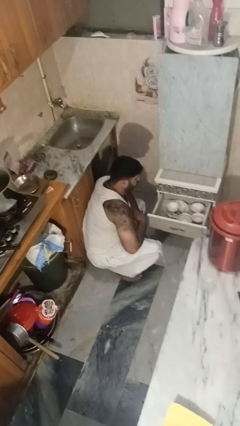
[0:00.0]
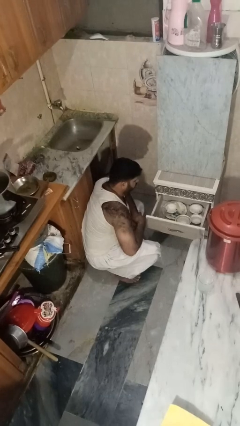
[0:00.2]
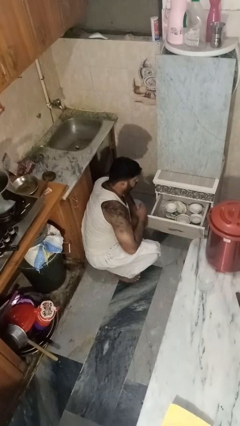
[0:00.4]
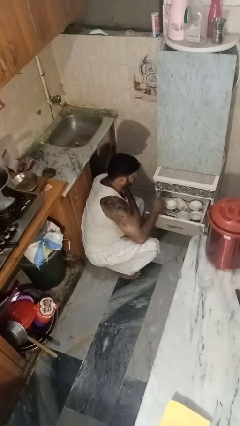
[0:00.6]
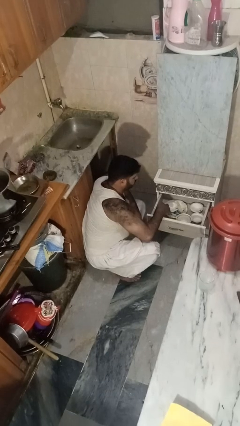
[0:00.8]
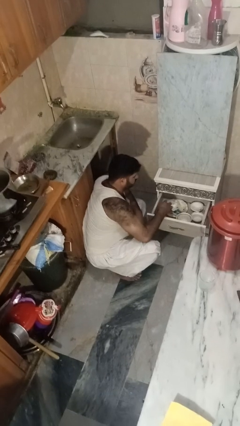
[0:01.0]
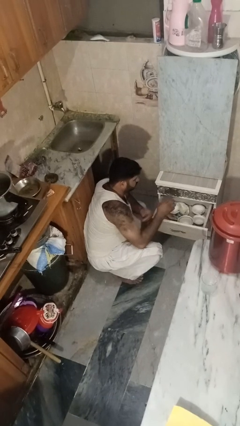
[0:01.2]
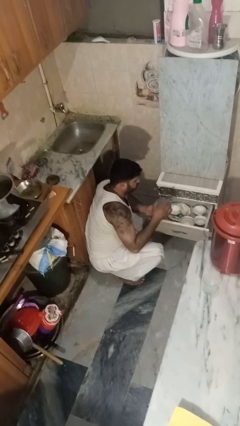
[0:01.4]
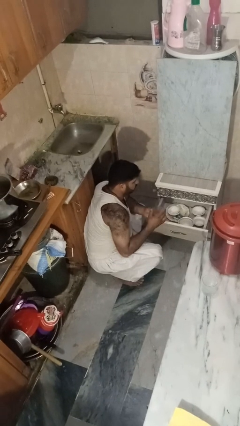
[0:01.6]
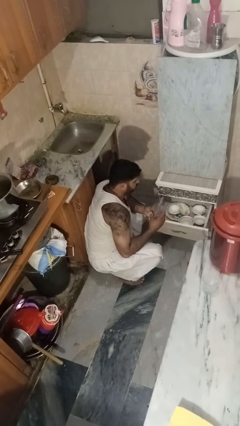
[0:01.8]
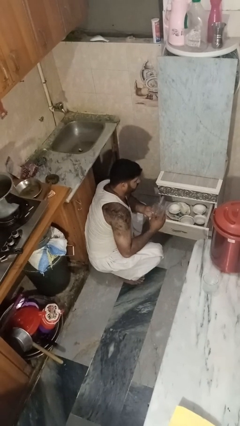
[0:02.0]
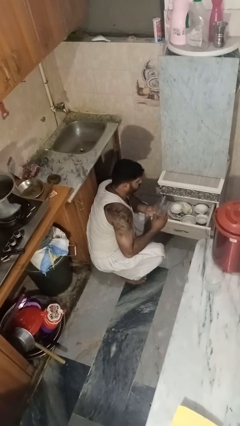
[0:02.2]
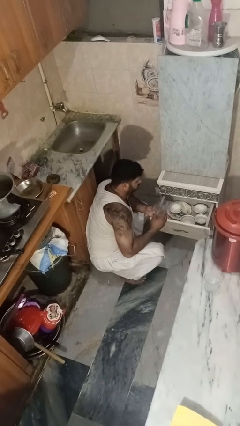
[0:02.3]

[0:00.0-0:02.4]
person takes object from kitchen drawer

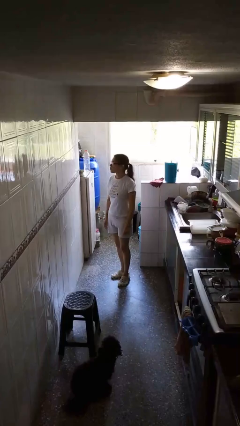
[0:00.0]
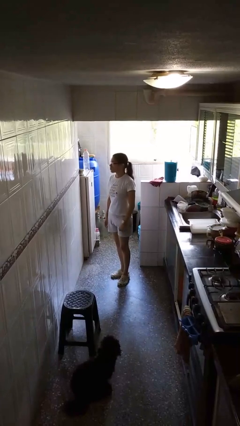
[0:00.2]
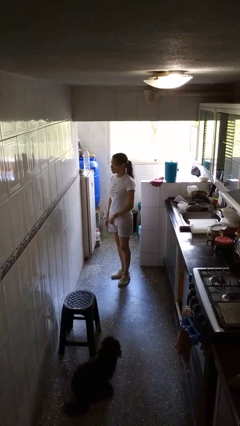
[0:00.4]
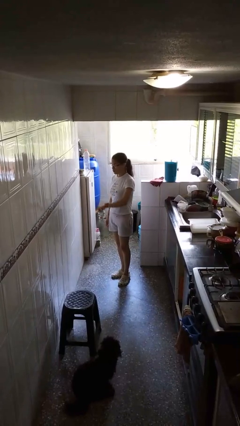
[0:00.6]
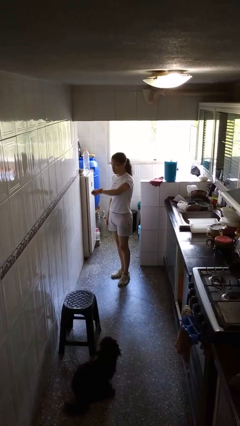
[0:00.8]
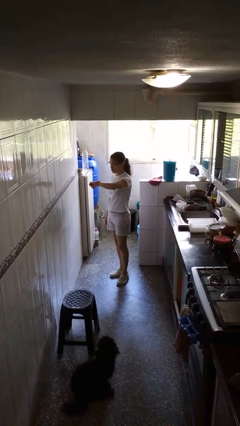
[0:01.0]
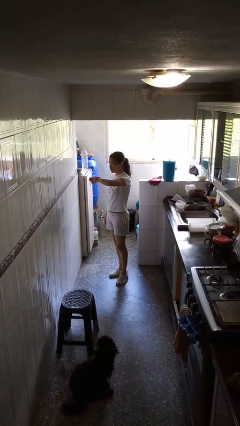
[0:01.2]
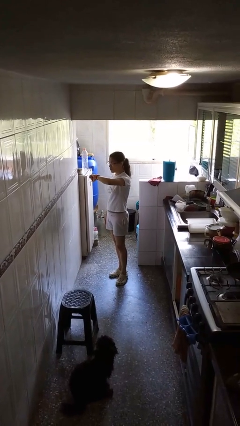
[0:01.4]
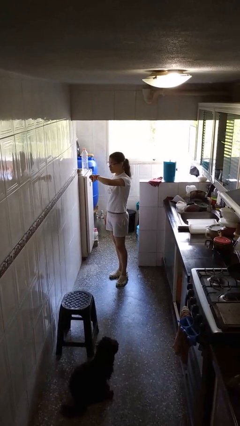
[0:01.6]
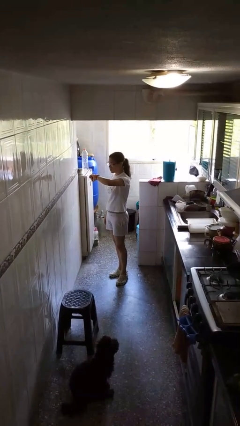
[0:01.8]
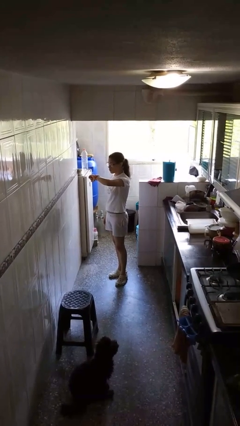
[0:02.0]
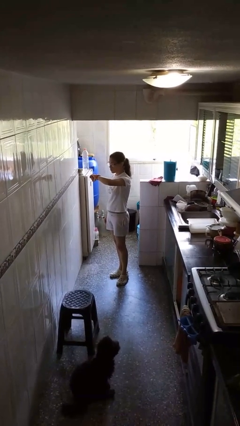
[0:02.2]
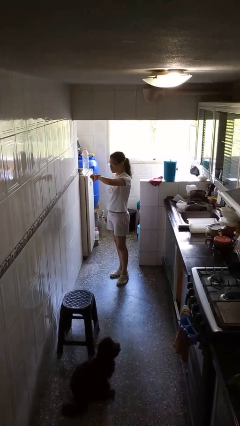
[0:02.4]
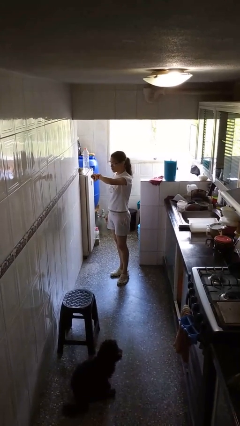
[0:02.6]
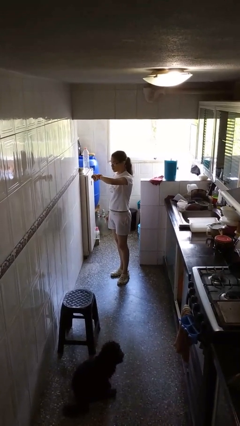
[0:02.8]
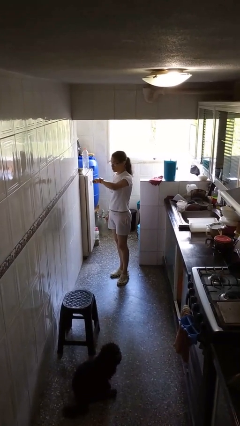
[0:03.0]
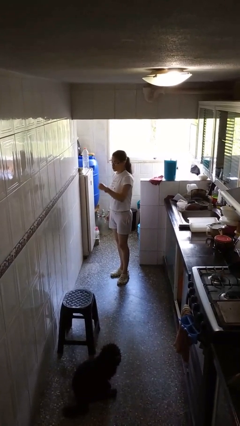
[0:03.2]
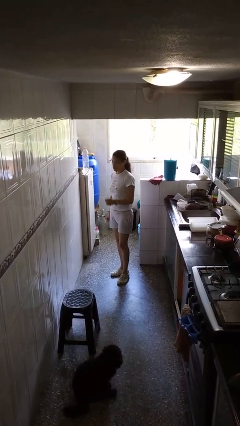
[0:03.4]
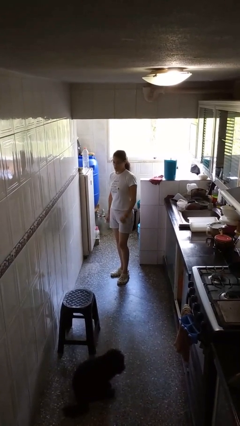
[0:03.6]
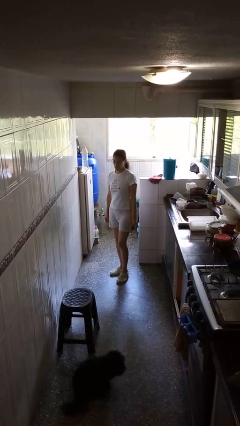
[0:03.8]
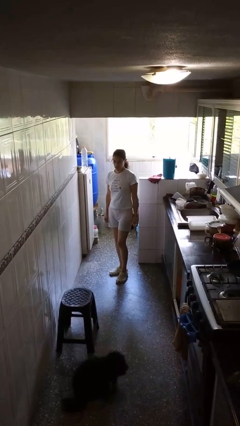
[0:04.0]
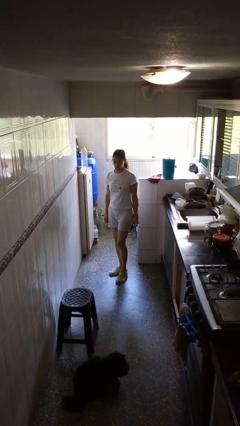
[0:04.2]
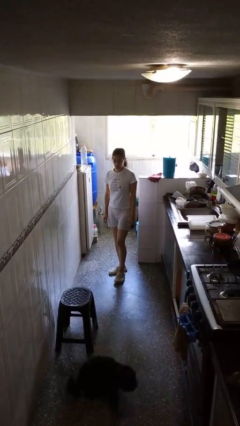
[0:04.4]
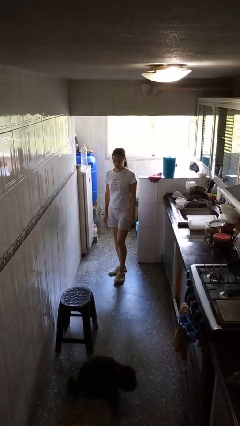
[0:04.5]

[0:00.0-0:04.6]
person looks at wristwatch

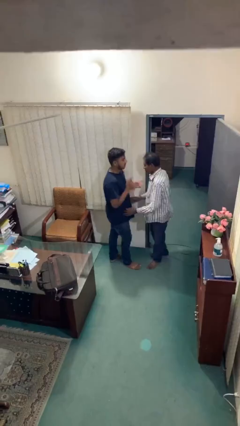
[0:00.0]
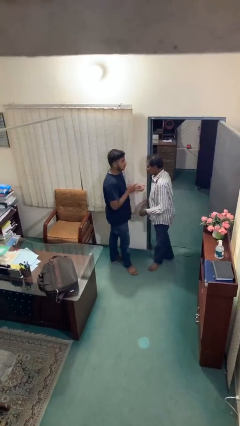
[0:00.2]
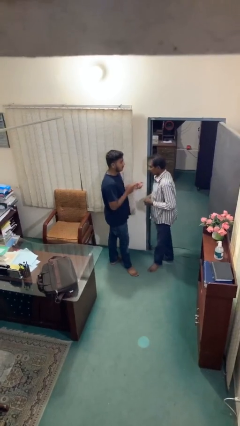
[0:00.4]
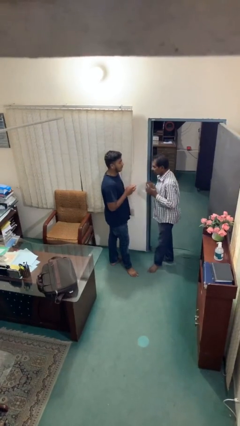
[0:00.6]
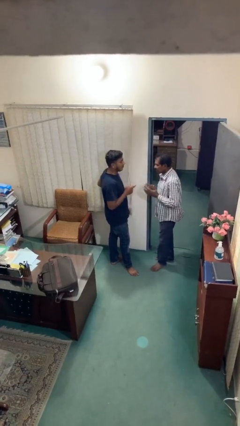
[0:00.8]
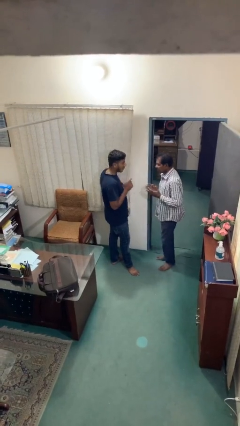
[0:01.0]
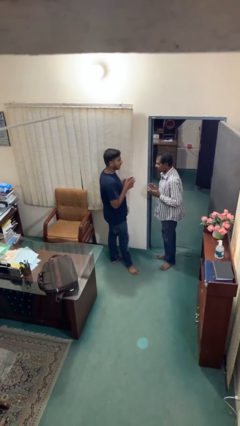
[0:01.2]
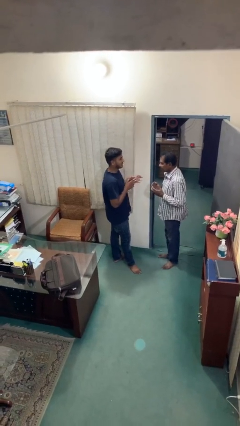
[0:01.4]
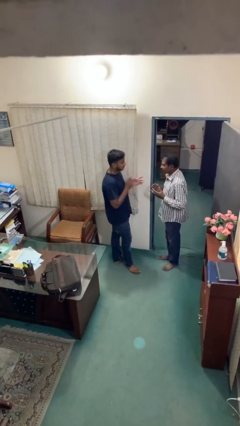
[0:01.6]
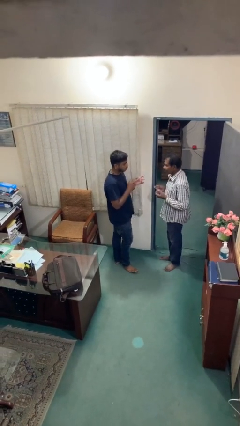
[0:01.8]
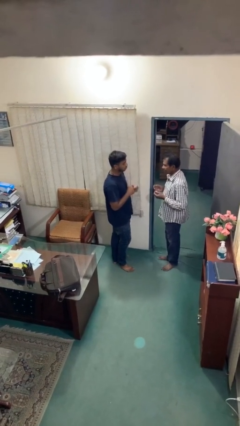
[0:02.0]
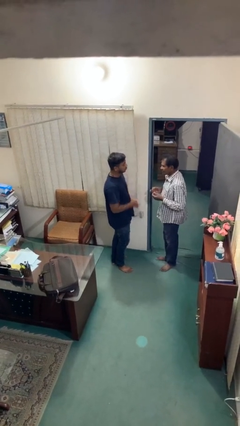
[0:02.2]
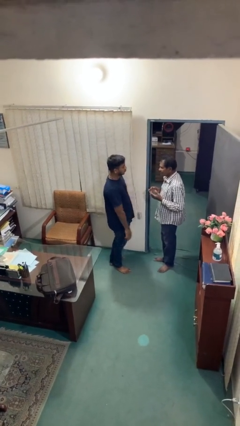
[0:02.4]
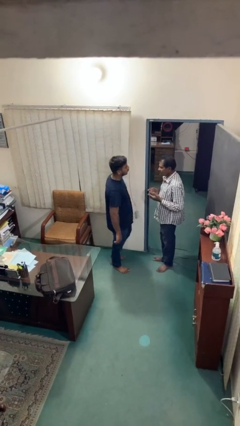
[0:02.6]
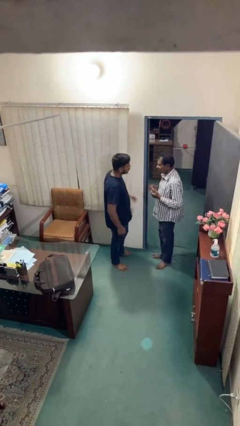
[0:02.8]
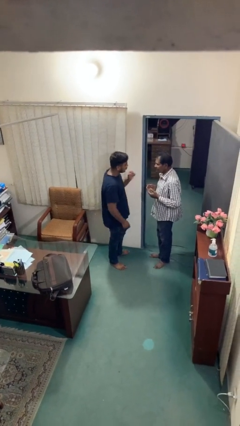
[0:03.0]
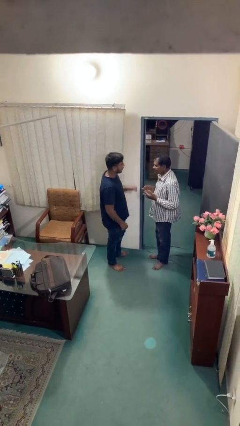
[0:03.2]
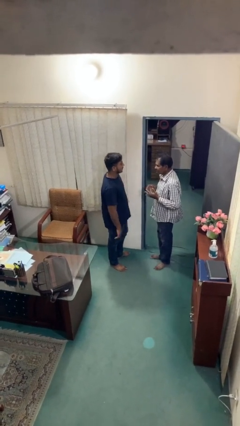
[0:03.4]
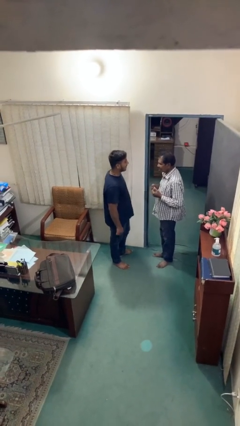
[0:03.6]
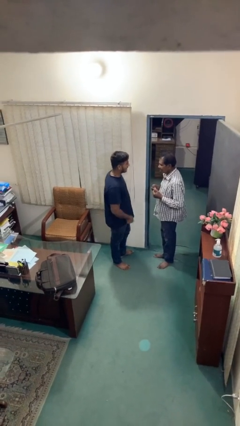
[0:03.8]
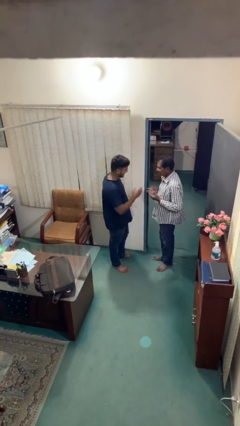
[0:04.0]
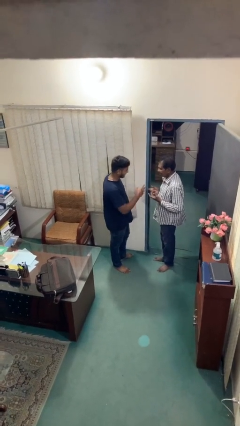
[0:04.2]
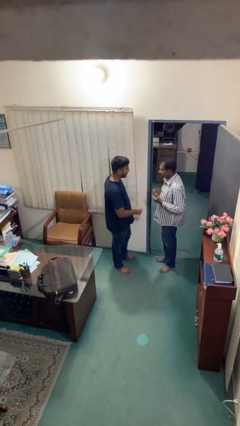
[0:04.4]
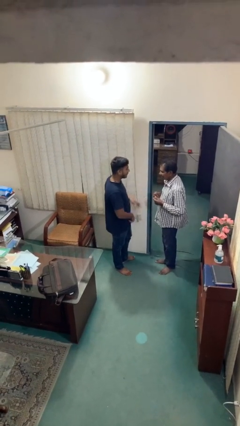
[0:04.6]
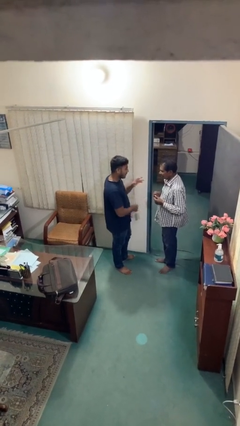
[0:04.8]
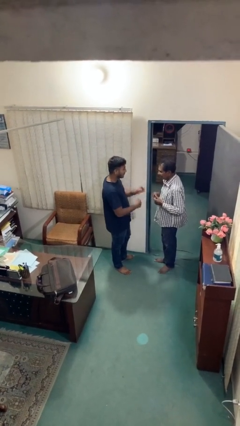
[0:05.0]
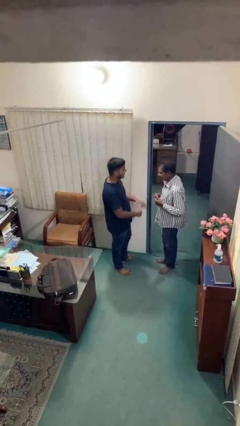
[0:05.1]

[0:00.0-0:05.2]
person talks to person

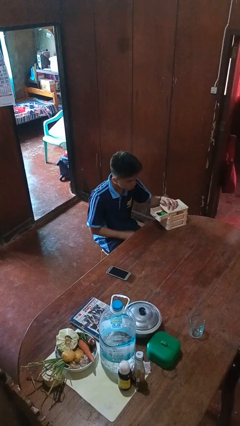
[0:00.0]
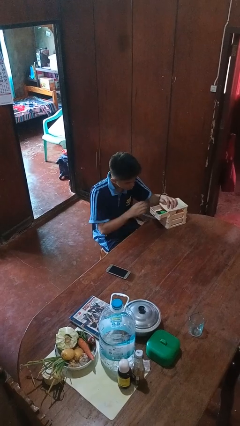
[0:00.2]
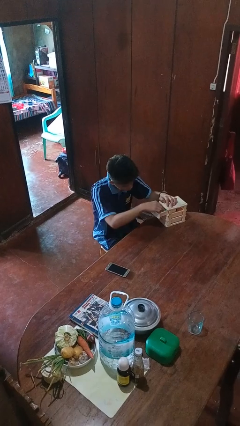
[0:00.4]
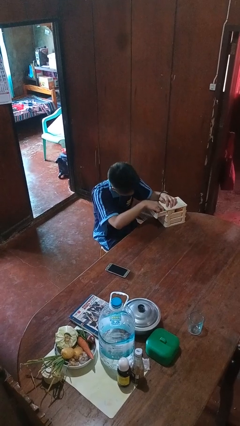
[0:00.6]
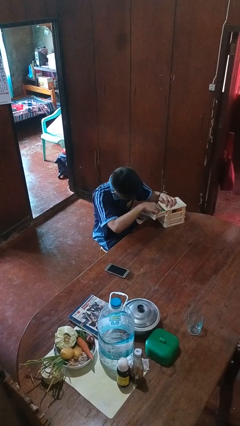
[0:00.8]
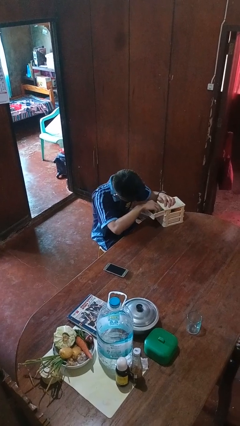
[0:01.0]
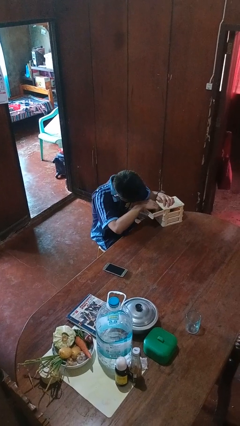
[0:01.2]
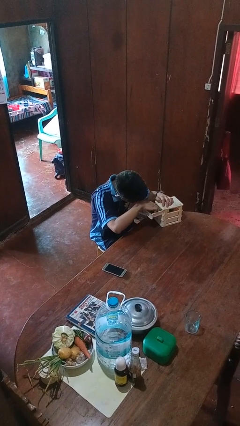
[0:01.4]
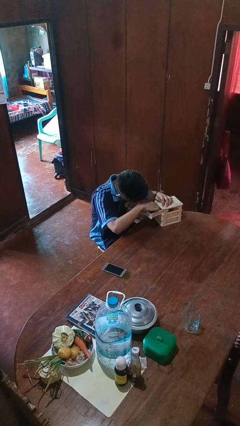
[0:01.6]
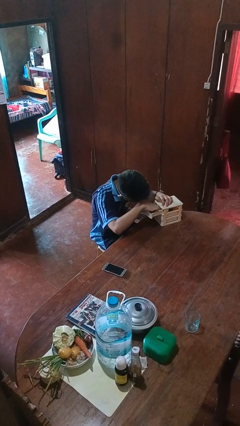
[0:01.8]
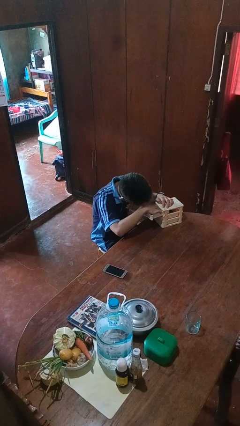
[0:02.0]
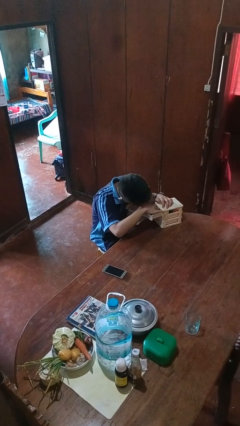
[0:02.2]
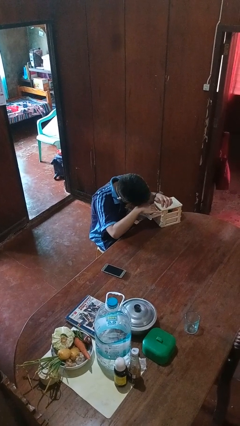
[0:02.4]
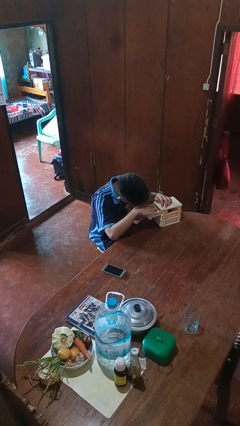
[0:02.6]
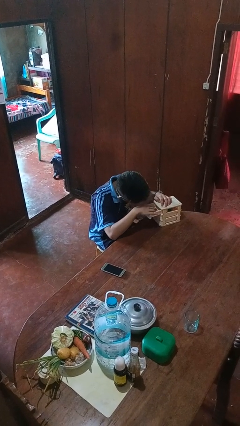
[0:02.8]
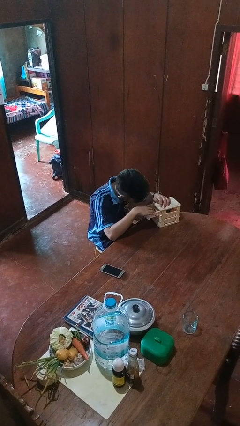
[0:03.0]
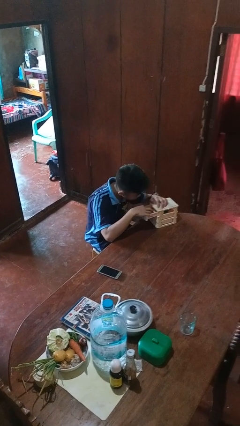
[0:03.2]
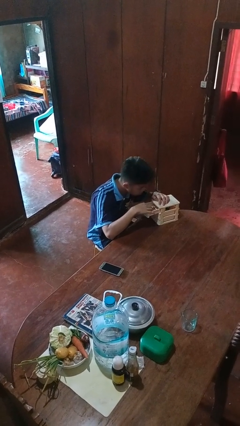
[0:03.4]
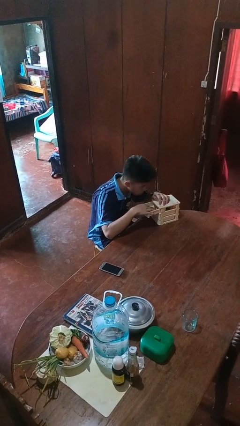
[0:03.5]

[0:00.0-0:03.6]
person searches jewelry box

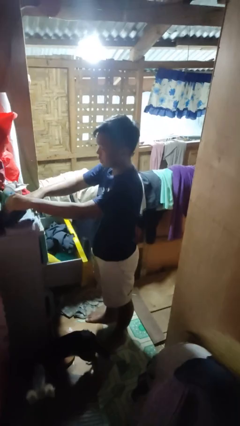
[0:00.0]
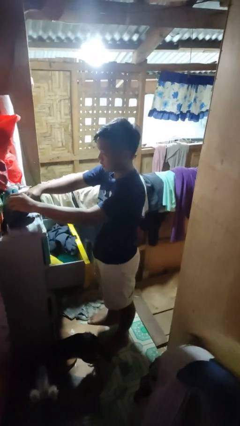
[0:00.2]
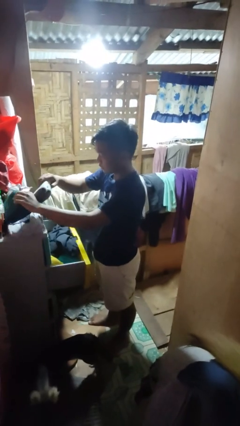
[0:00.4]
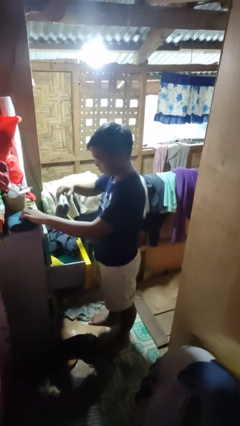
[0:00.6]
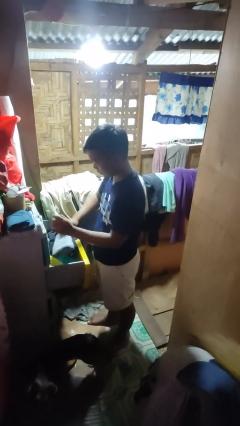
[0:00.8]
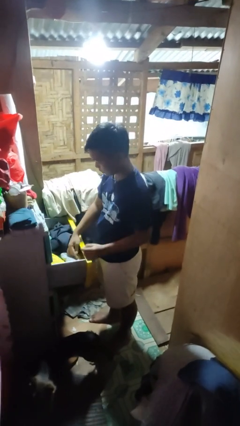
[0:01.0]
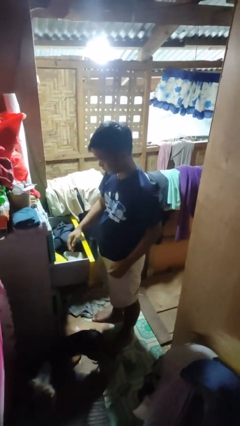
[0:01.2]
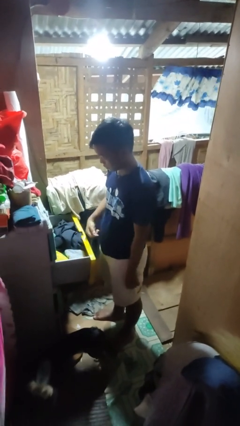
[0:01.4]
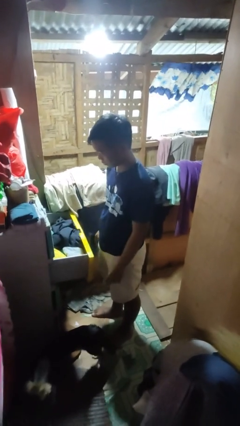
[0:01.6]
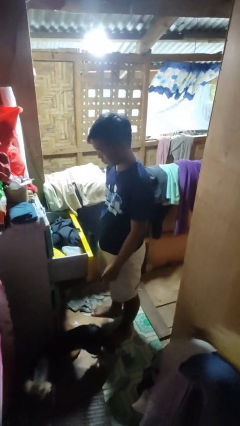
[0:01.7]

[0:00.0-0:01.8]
person puts clothes into dresser
